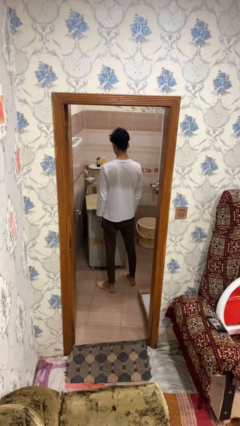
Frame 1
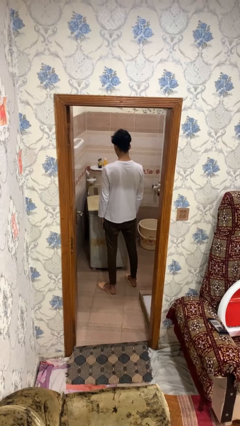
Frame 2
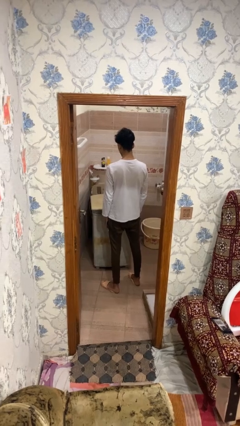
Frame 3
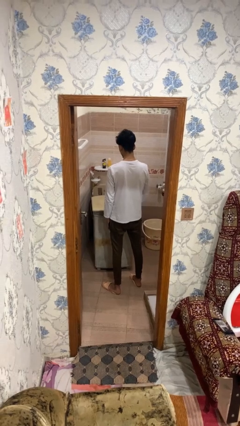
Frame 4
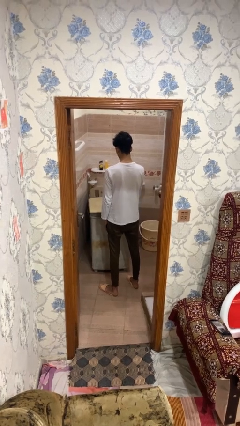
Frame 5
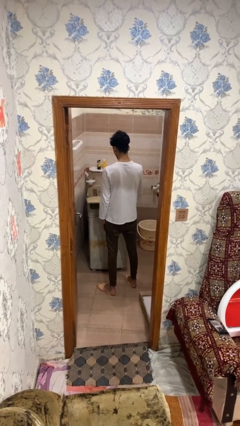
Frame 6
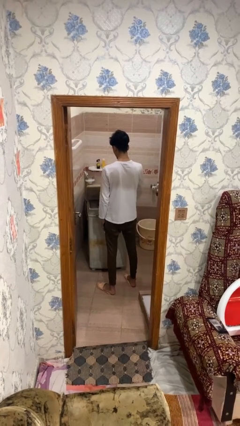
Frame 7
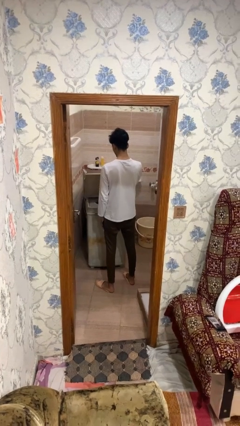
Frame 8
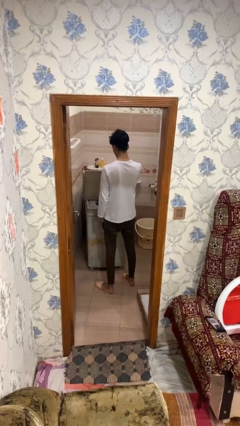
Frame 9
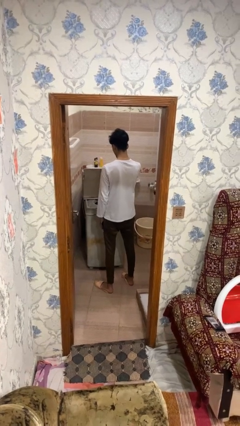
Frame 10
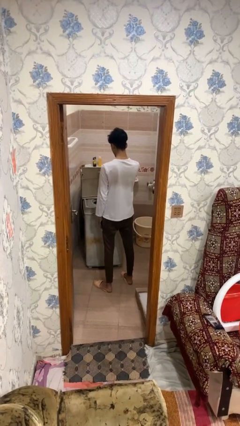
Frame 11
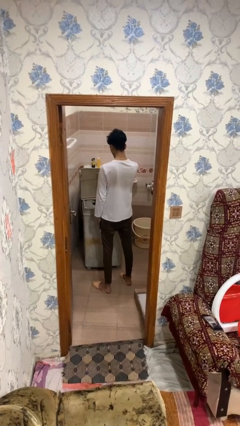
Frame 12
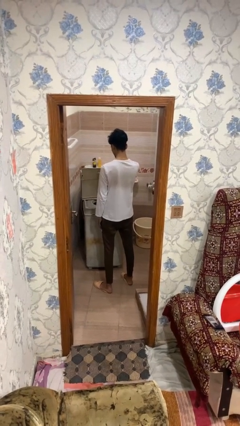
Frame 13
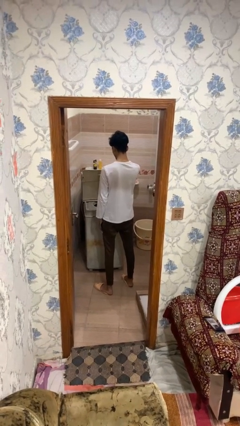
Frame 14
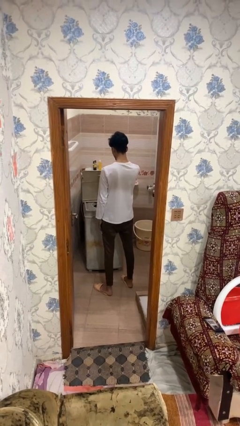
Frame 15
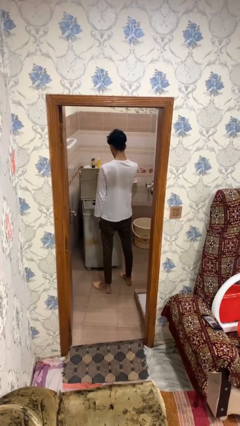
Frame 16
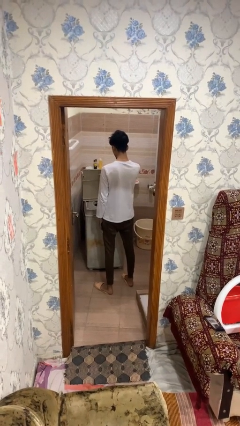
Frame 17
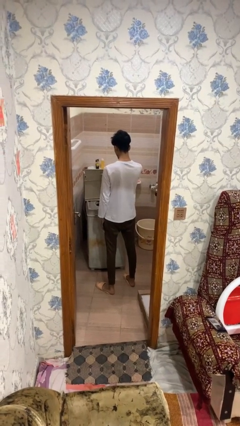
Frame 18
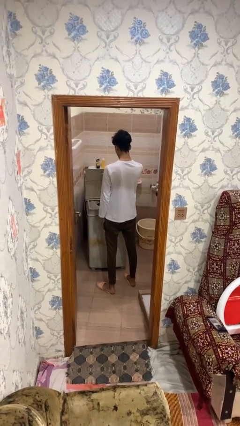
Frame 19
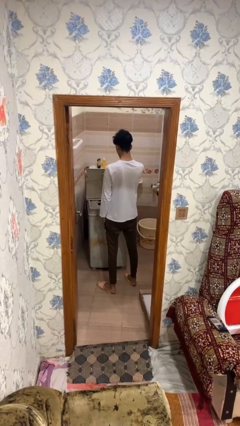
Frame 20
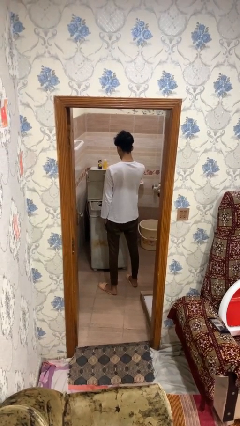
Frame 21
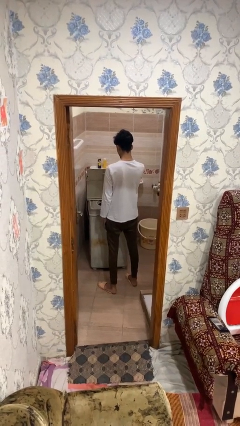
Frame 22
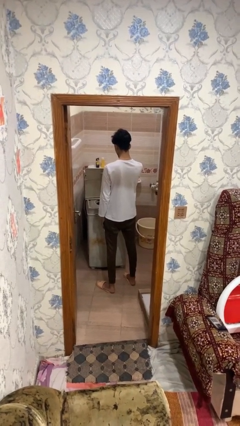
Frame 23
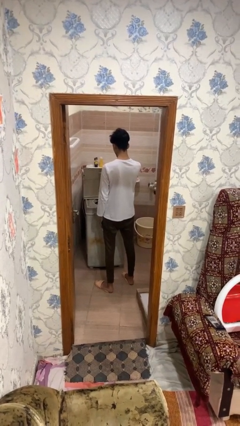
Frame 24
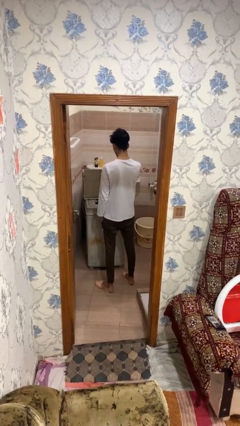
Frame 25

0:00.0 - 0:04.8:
person opens clothes washer

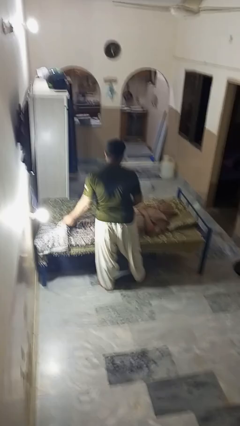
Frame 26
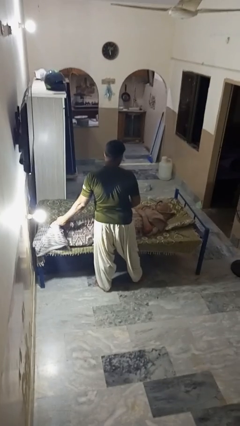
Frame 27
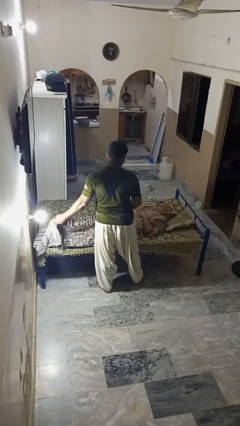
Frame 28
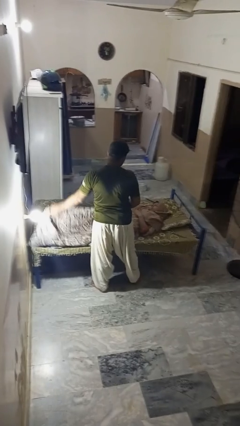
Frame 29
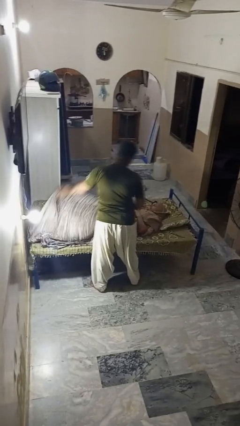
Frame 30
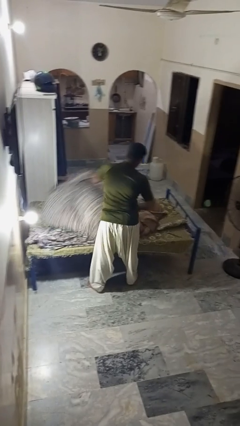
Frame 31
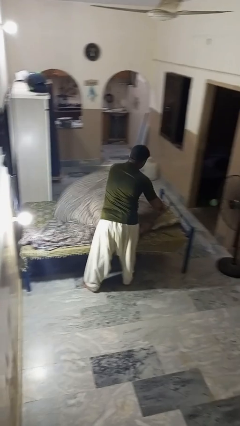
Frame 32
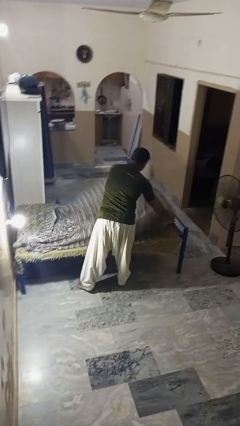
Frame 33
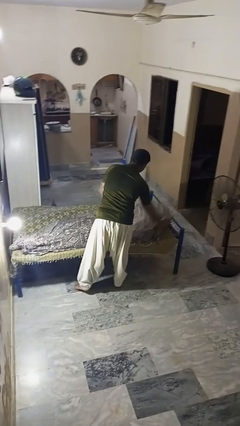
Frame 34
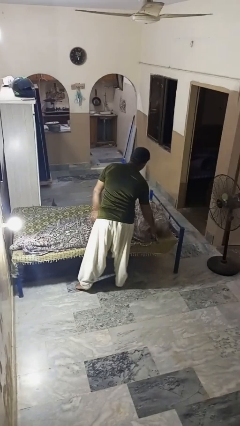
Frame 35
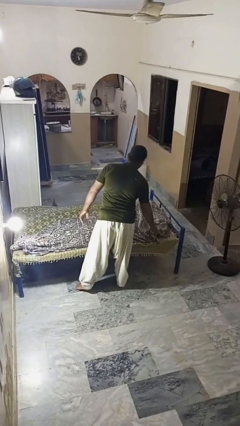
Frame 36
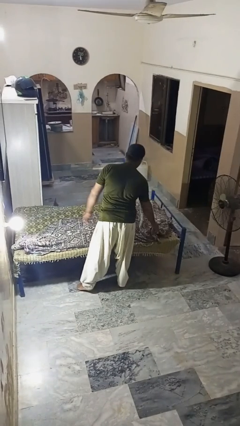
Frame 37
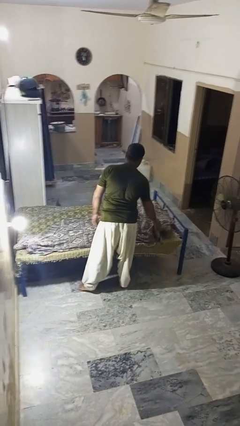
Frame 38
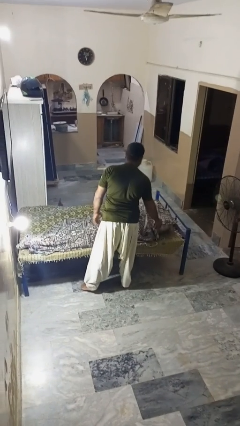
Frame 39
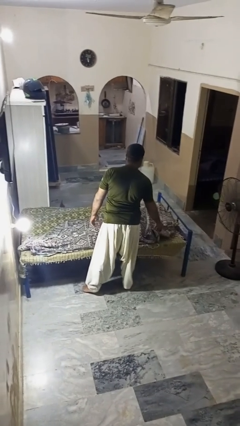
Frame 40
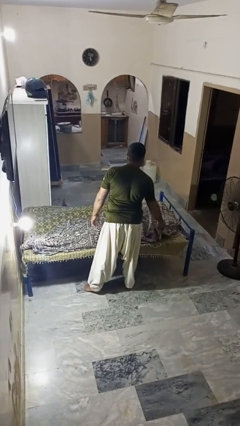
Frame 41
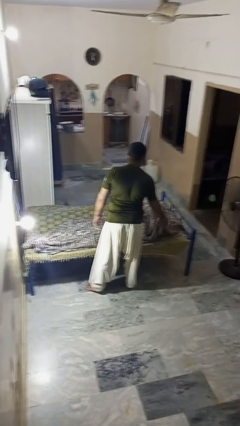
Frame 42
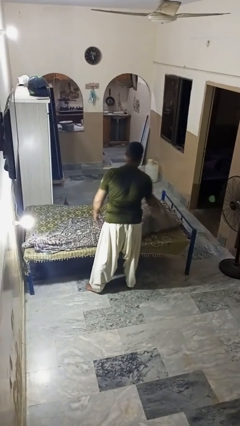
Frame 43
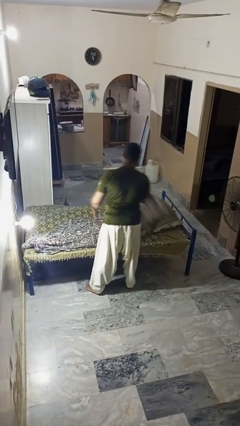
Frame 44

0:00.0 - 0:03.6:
person covers friend with blanket

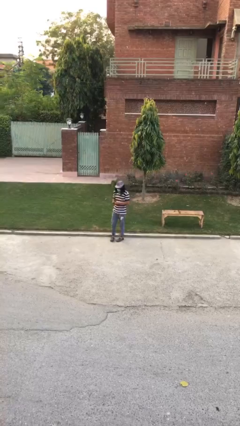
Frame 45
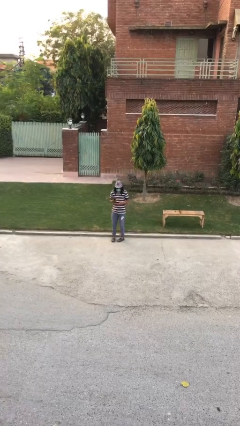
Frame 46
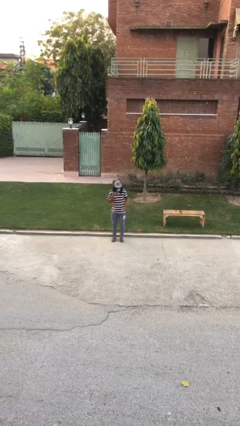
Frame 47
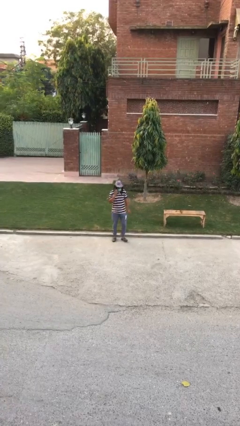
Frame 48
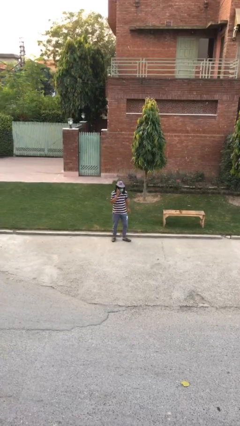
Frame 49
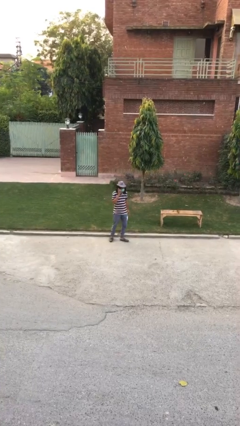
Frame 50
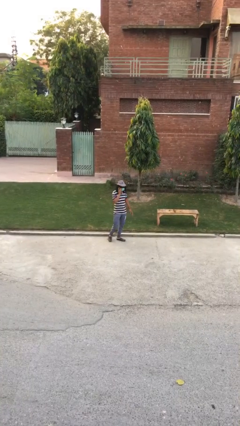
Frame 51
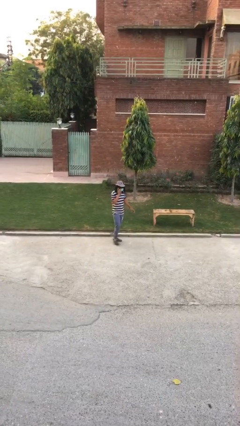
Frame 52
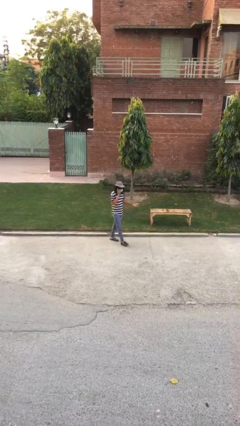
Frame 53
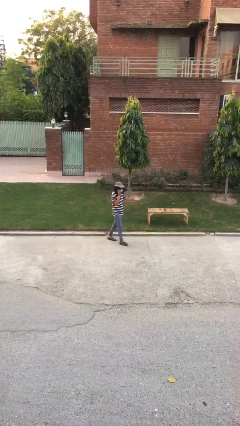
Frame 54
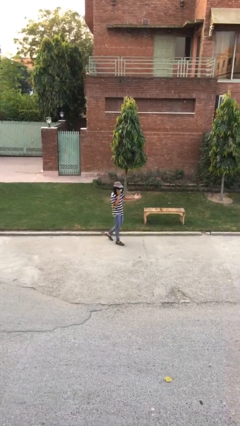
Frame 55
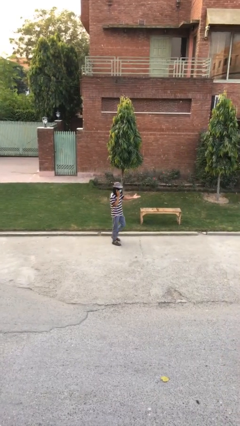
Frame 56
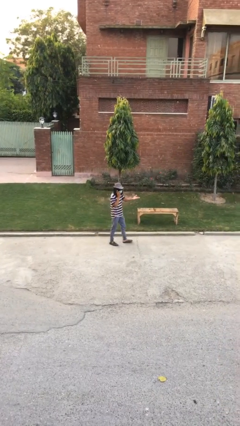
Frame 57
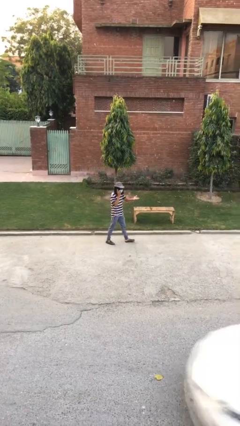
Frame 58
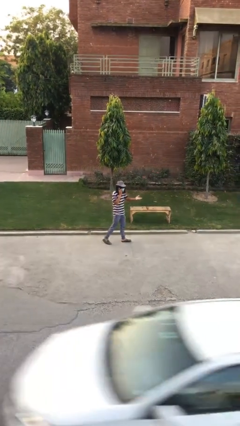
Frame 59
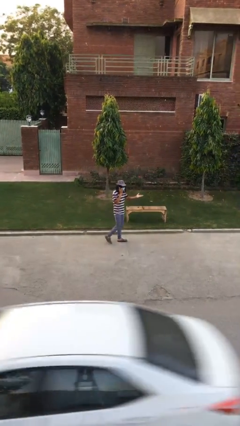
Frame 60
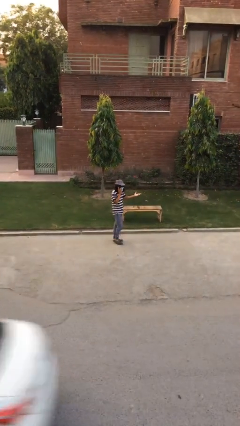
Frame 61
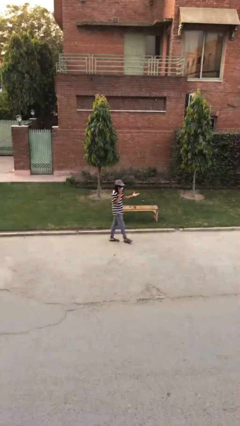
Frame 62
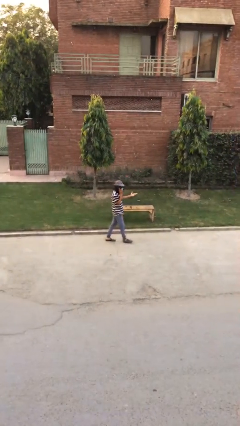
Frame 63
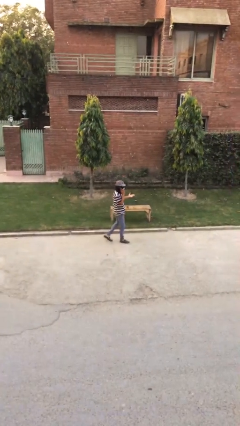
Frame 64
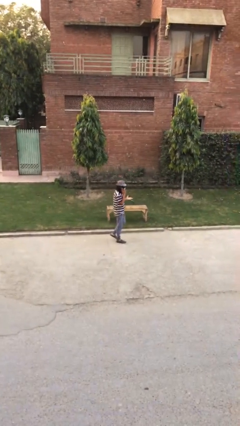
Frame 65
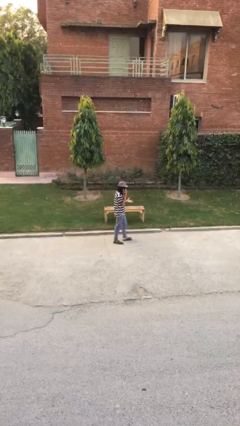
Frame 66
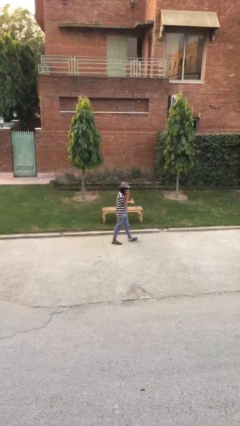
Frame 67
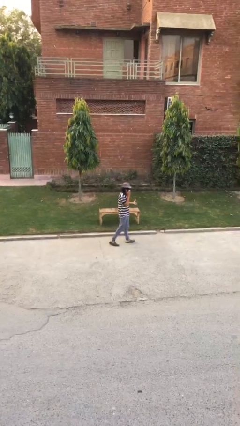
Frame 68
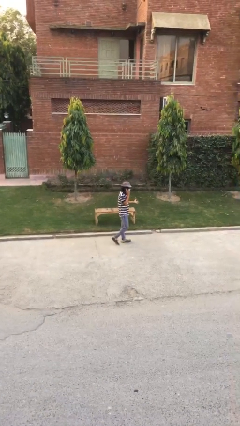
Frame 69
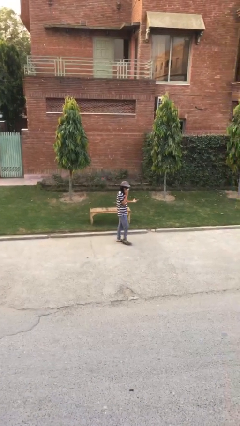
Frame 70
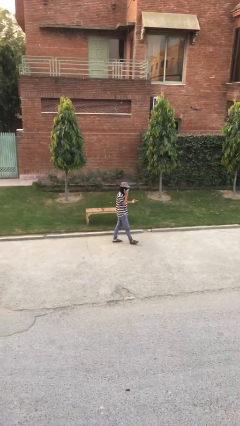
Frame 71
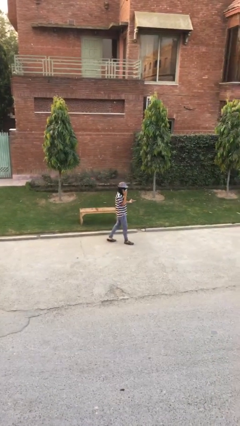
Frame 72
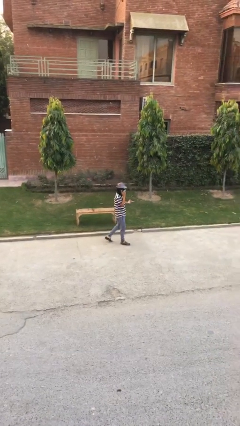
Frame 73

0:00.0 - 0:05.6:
person talks on phone

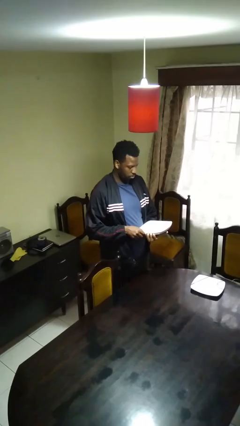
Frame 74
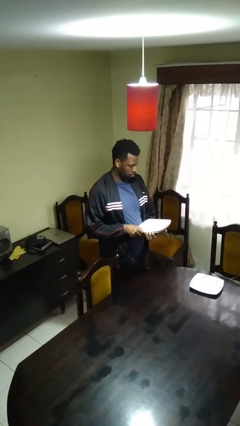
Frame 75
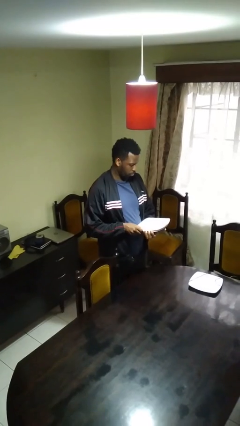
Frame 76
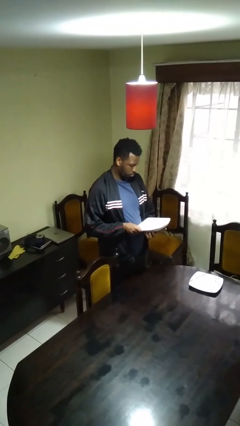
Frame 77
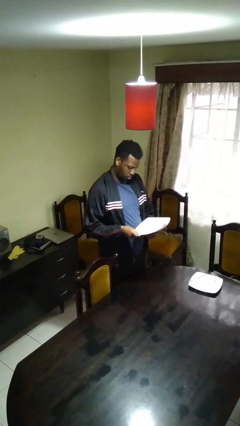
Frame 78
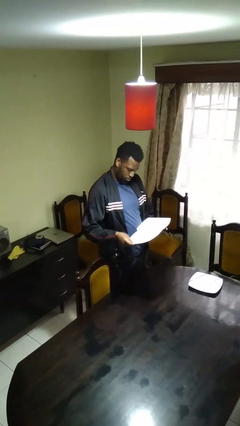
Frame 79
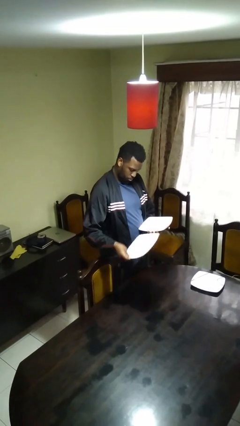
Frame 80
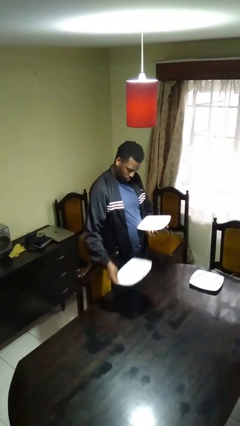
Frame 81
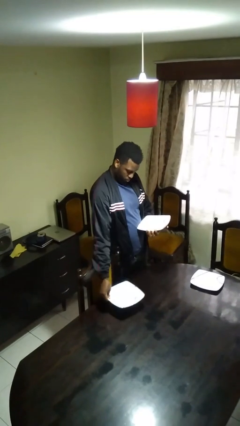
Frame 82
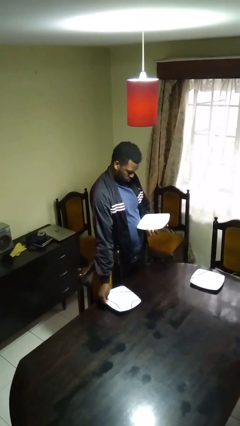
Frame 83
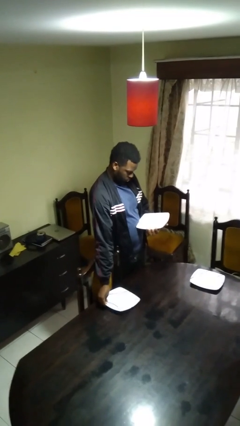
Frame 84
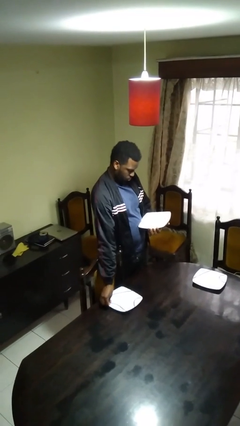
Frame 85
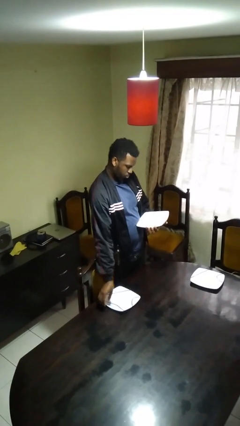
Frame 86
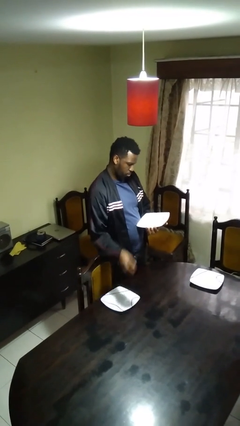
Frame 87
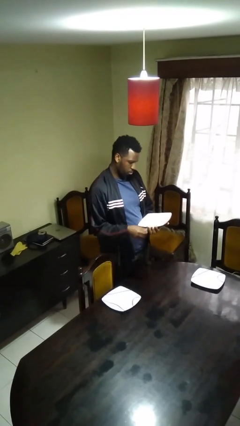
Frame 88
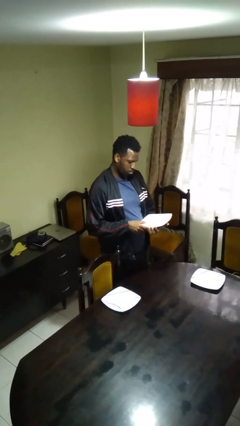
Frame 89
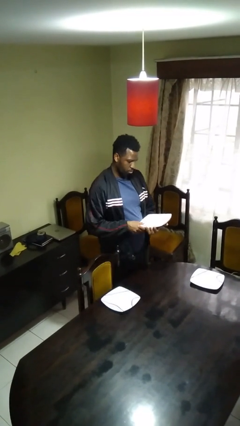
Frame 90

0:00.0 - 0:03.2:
person sets table

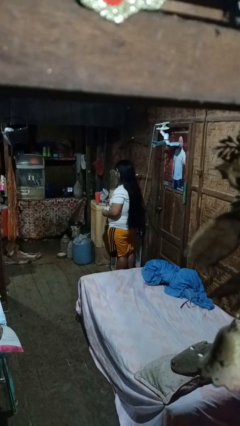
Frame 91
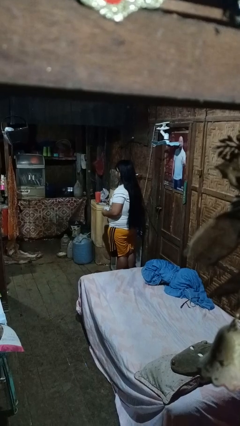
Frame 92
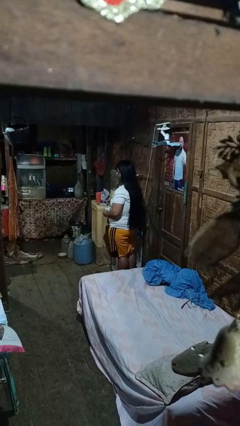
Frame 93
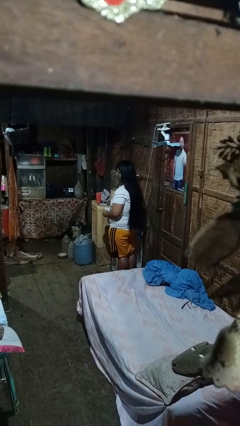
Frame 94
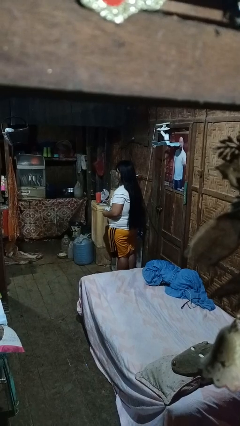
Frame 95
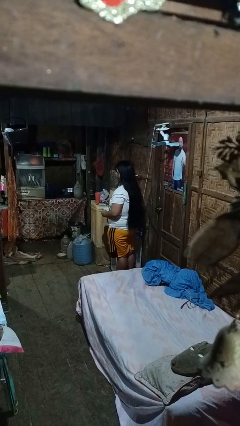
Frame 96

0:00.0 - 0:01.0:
person stirs mug
